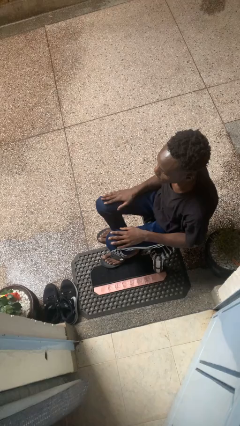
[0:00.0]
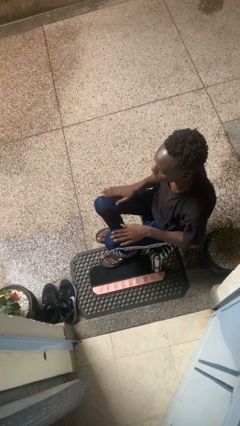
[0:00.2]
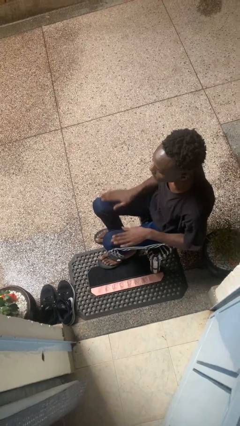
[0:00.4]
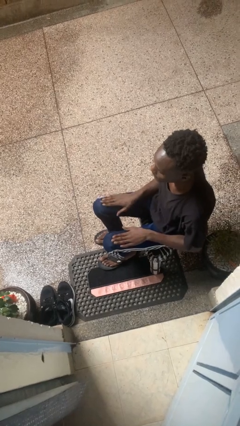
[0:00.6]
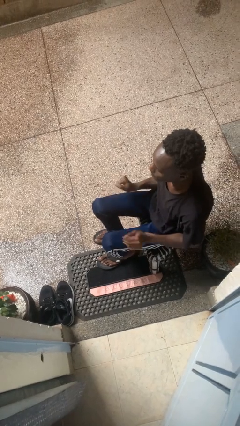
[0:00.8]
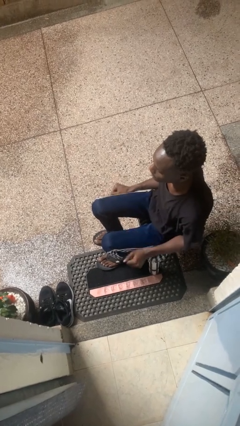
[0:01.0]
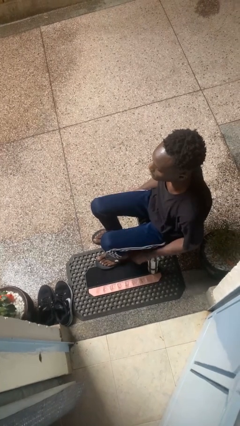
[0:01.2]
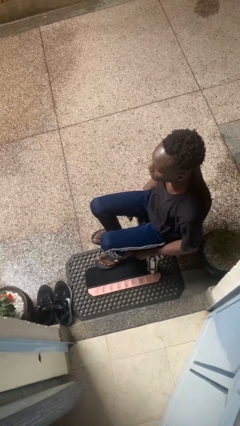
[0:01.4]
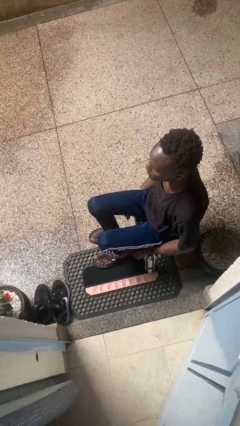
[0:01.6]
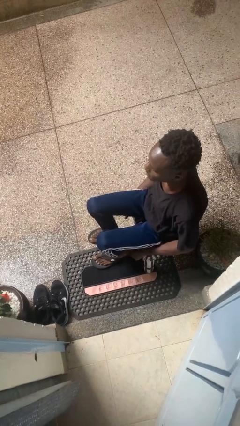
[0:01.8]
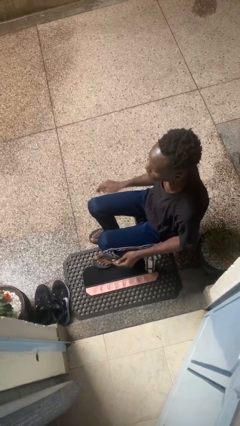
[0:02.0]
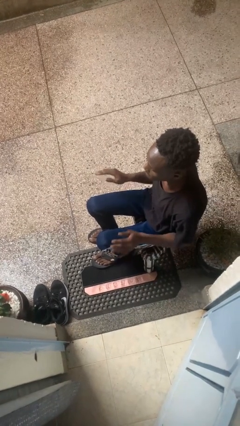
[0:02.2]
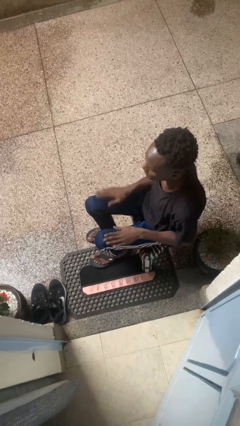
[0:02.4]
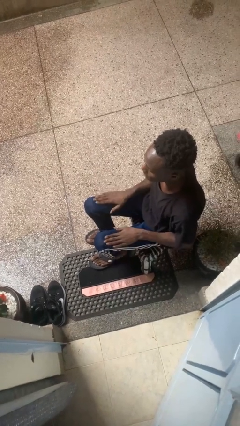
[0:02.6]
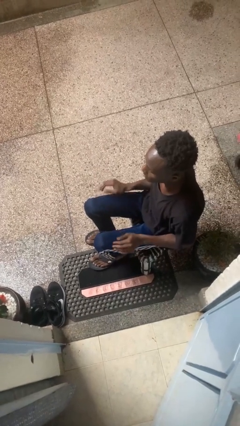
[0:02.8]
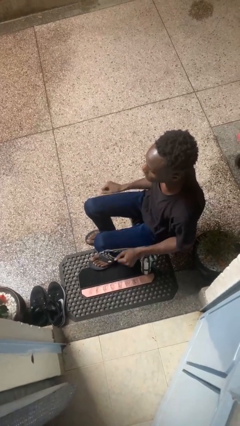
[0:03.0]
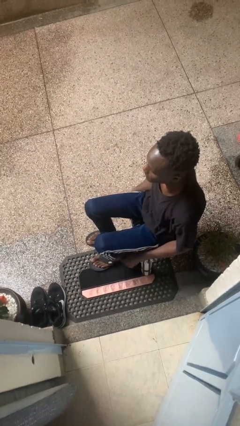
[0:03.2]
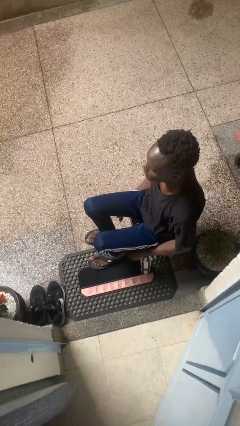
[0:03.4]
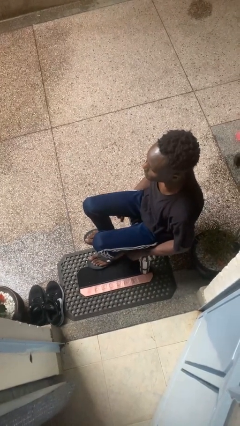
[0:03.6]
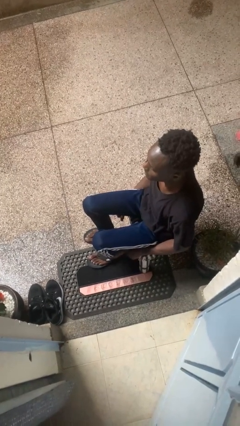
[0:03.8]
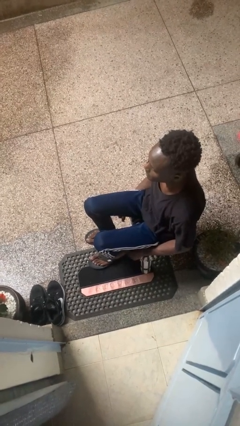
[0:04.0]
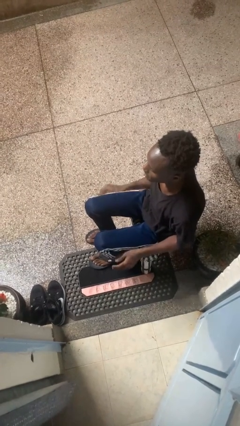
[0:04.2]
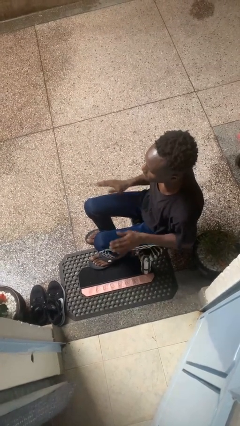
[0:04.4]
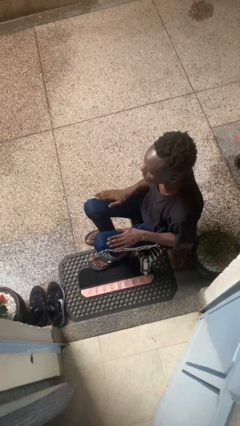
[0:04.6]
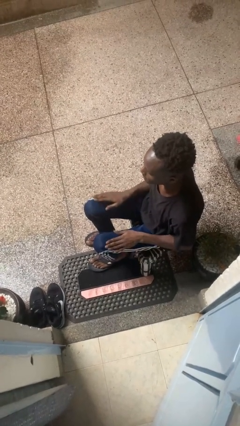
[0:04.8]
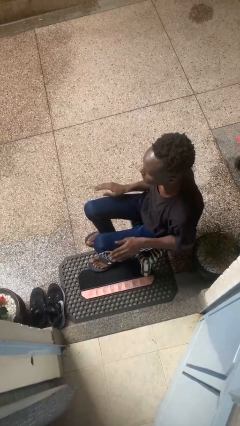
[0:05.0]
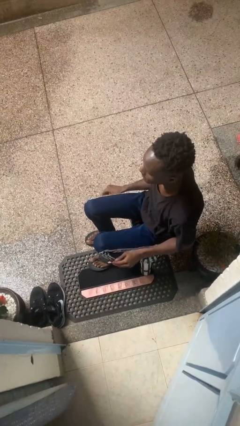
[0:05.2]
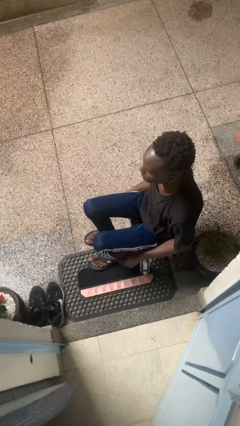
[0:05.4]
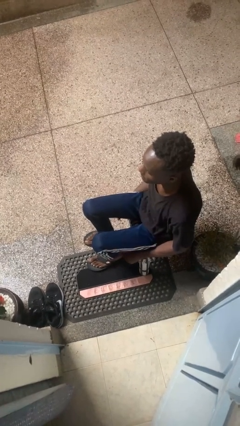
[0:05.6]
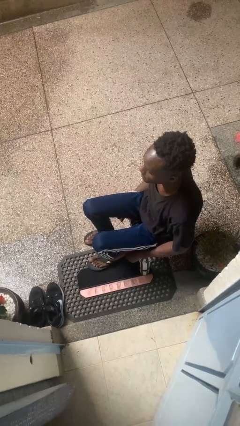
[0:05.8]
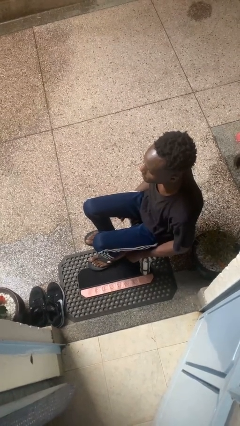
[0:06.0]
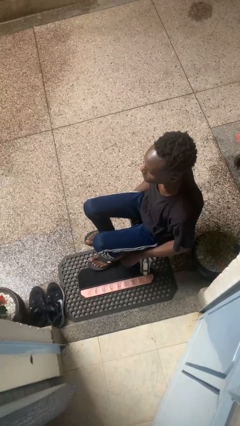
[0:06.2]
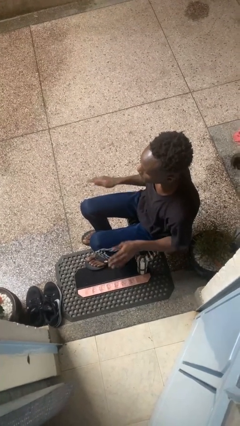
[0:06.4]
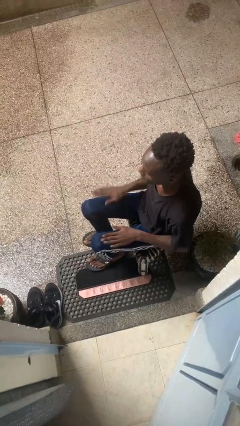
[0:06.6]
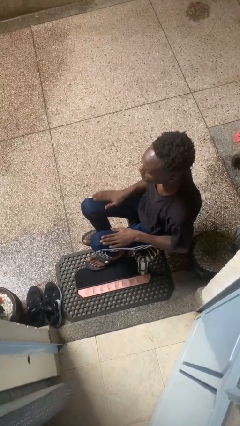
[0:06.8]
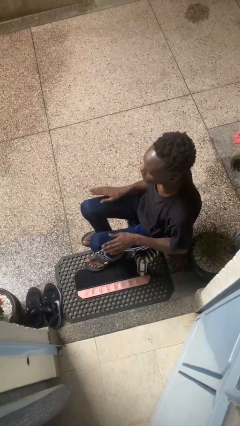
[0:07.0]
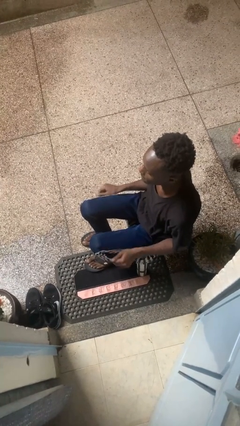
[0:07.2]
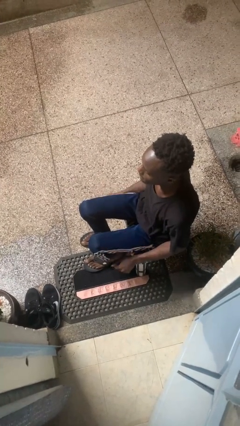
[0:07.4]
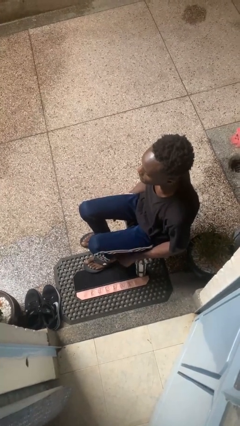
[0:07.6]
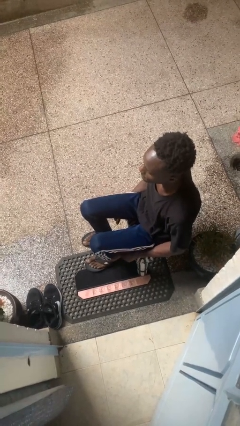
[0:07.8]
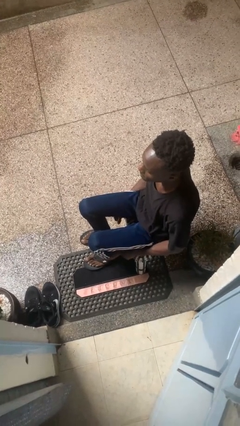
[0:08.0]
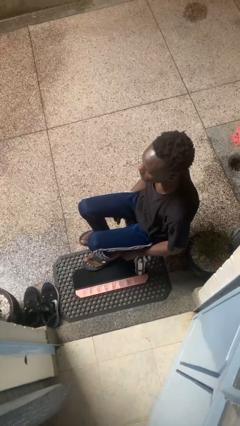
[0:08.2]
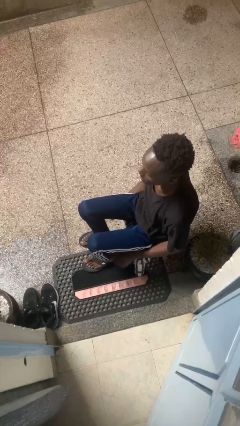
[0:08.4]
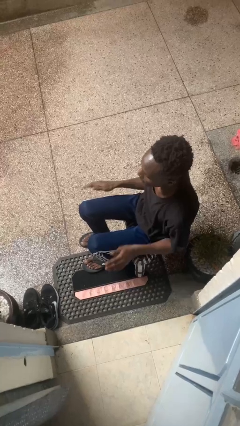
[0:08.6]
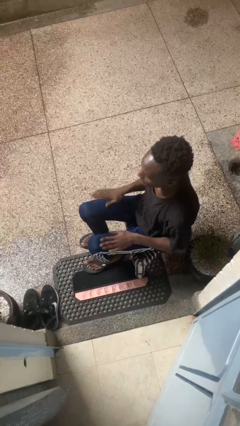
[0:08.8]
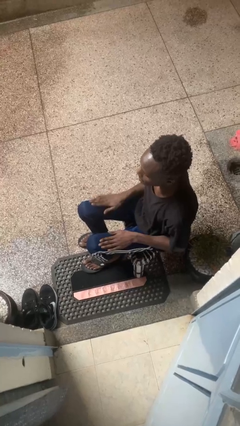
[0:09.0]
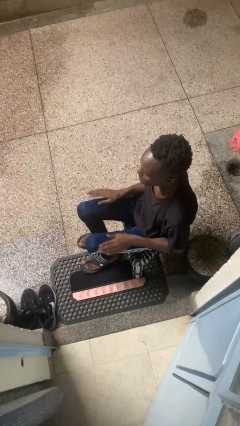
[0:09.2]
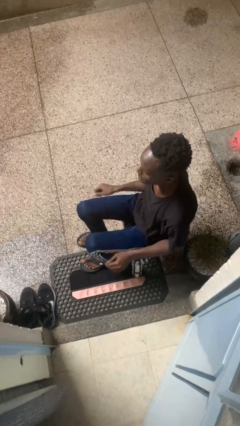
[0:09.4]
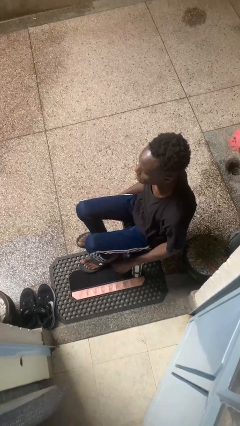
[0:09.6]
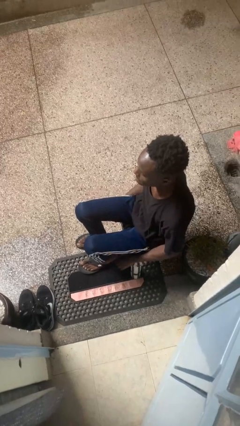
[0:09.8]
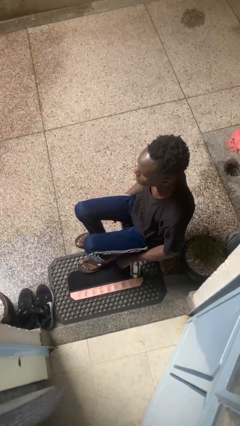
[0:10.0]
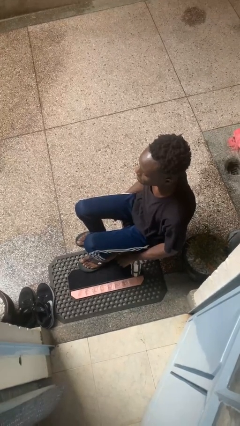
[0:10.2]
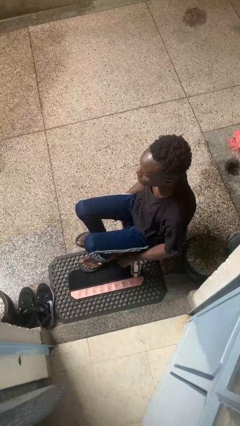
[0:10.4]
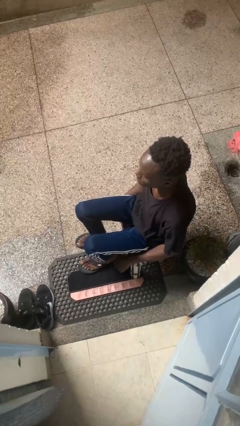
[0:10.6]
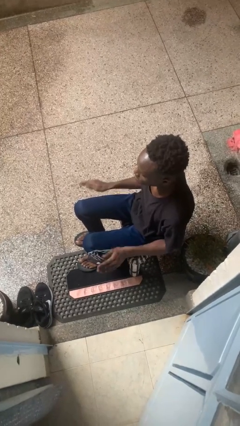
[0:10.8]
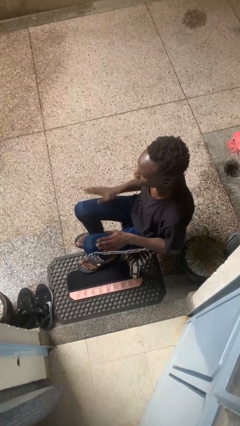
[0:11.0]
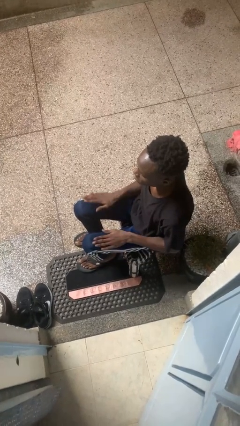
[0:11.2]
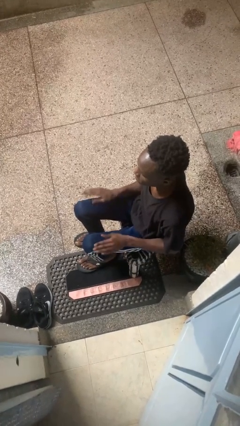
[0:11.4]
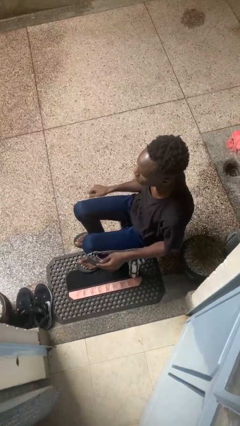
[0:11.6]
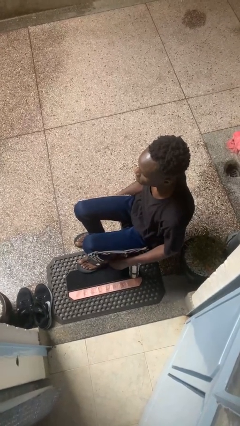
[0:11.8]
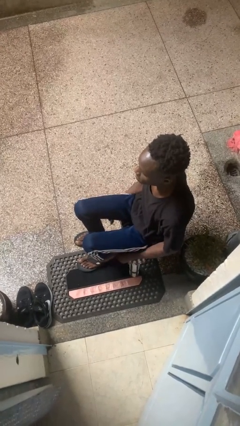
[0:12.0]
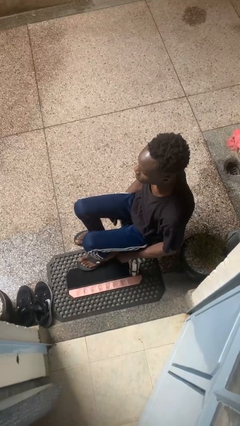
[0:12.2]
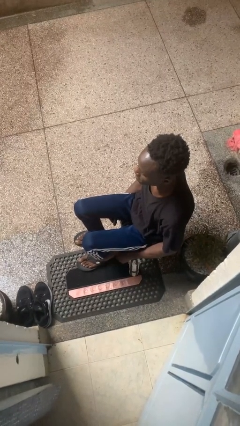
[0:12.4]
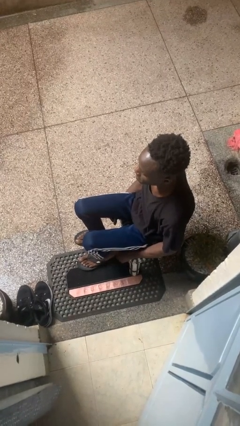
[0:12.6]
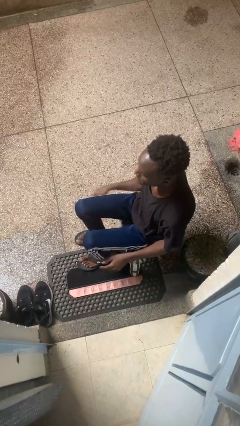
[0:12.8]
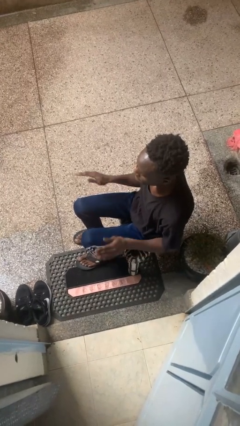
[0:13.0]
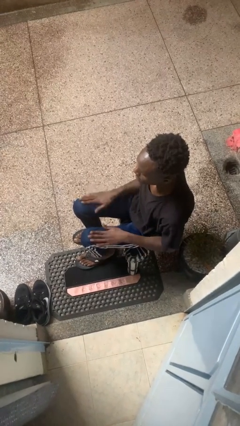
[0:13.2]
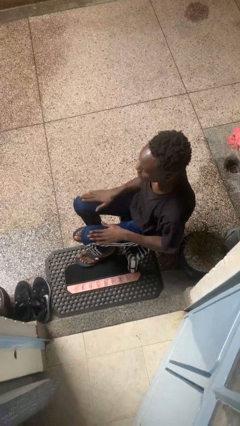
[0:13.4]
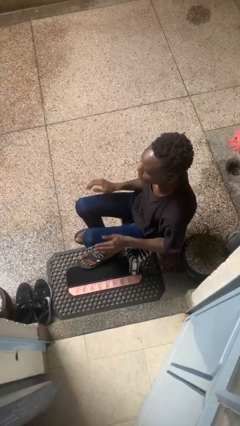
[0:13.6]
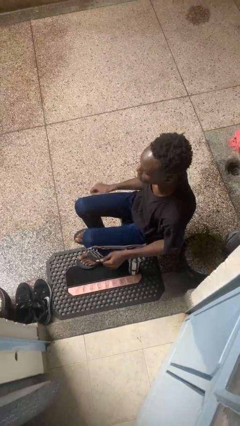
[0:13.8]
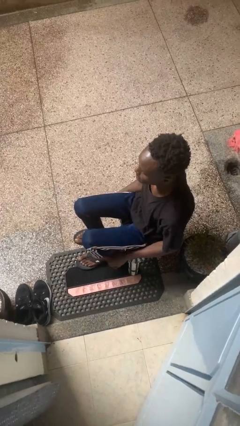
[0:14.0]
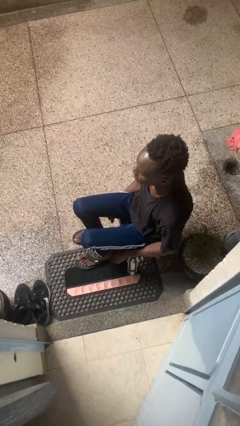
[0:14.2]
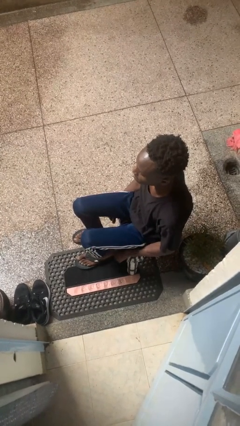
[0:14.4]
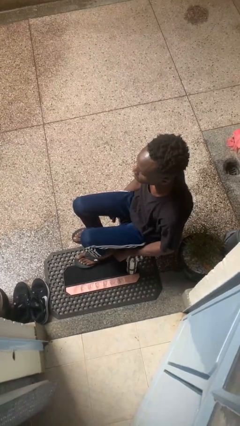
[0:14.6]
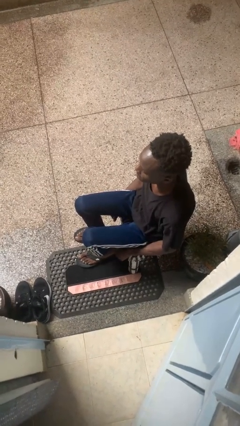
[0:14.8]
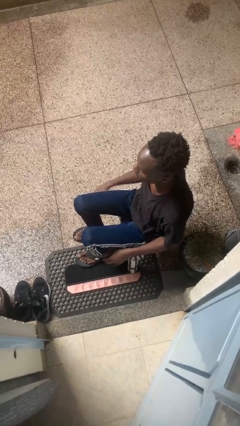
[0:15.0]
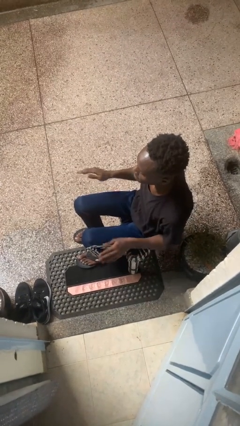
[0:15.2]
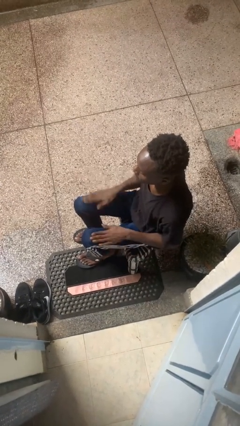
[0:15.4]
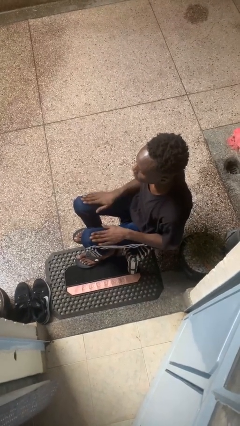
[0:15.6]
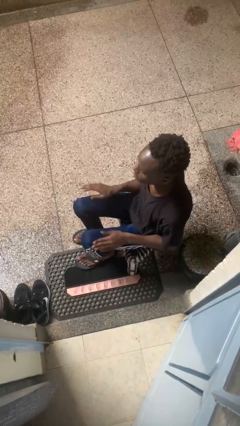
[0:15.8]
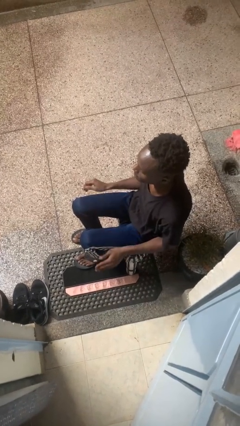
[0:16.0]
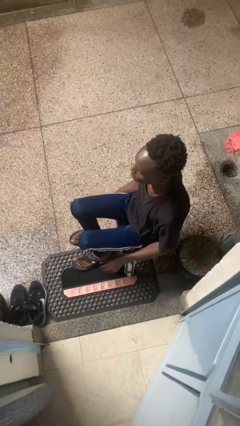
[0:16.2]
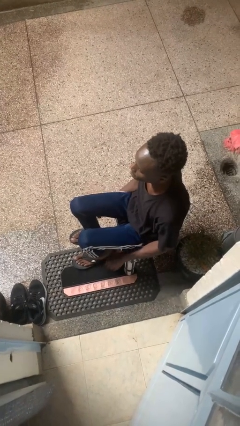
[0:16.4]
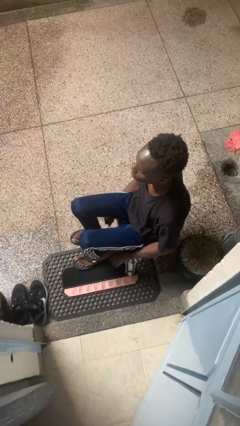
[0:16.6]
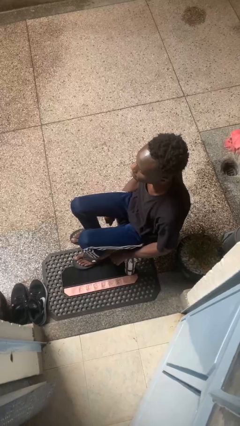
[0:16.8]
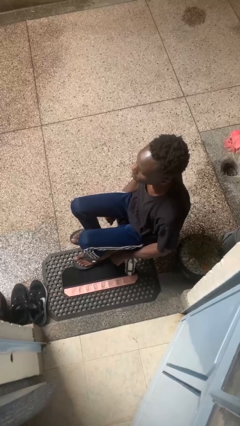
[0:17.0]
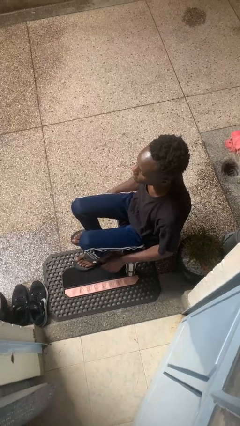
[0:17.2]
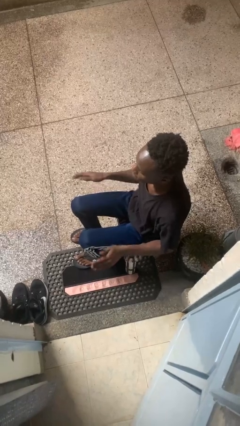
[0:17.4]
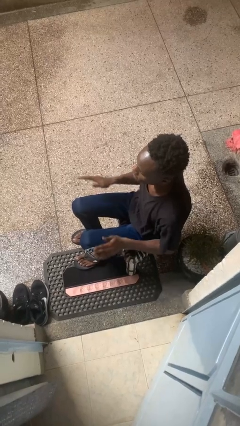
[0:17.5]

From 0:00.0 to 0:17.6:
person slaps hands on thighs

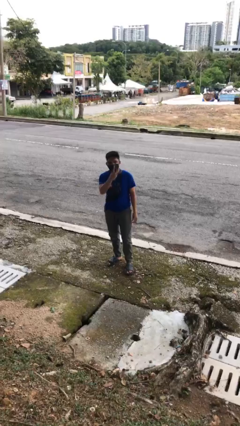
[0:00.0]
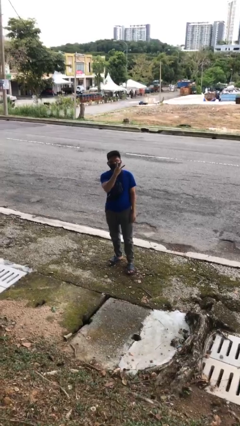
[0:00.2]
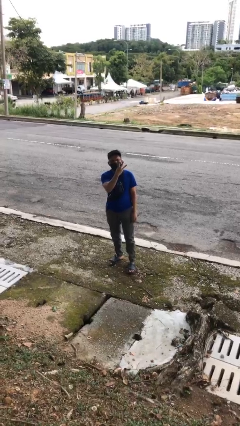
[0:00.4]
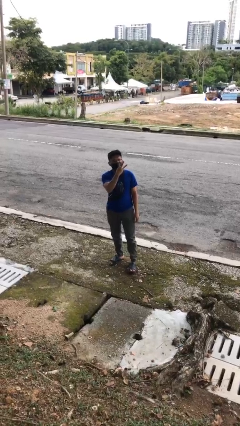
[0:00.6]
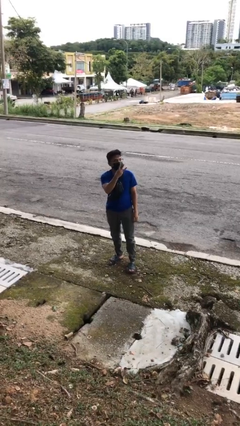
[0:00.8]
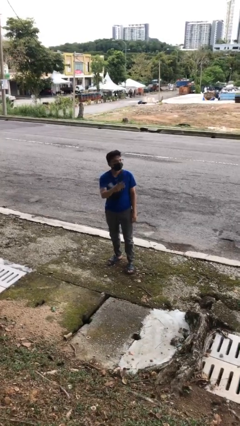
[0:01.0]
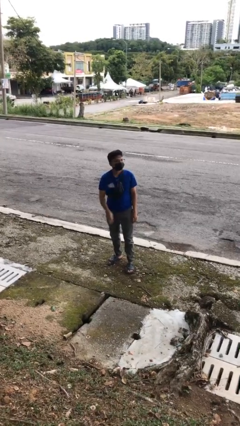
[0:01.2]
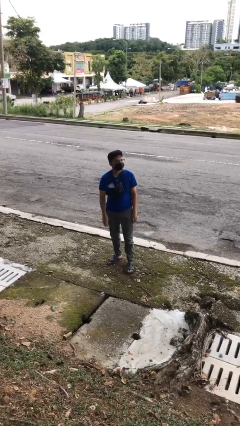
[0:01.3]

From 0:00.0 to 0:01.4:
person gestures number three
